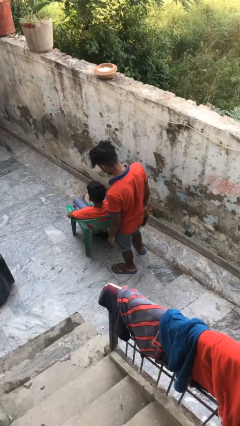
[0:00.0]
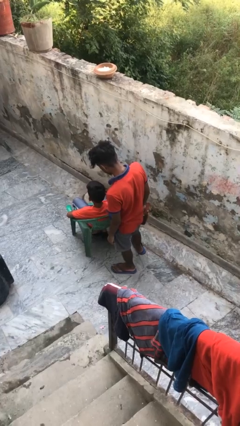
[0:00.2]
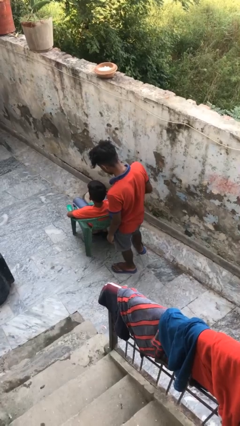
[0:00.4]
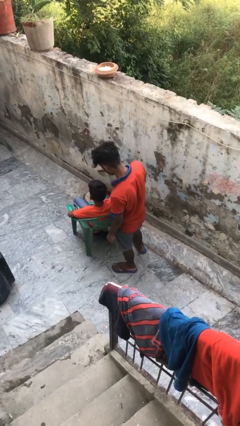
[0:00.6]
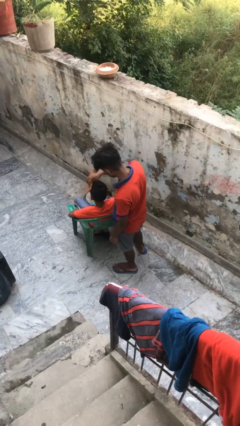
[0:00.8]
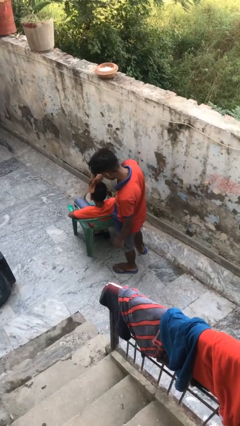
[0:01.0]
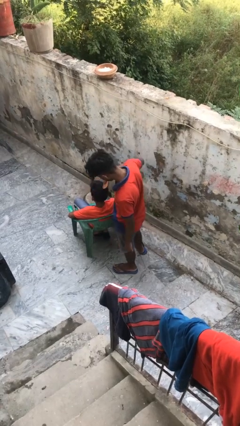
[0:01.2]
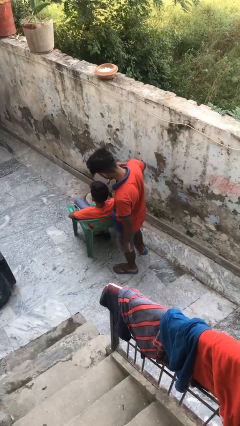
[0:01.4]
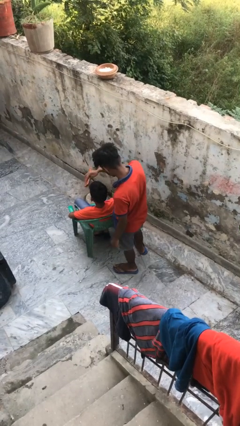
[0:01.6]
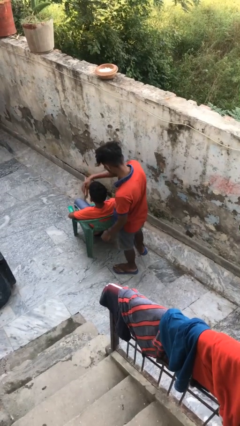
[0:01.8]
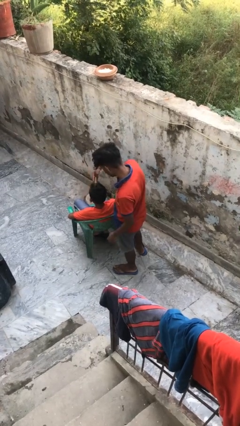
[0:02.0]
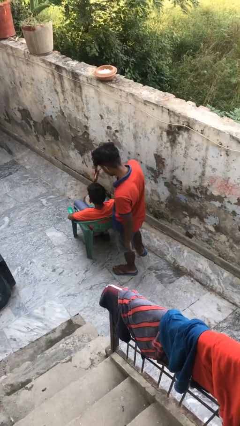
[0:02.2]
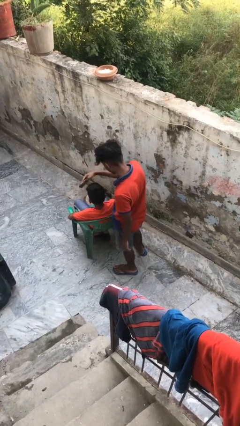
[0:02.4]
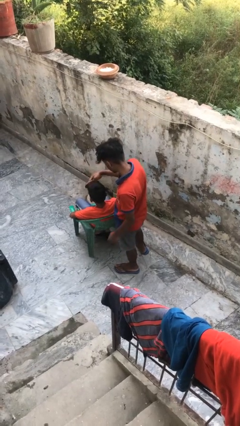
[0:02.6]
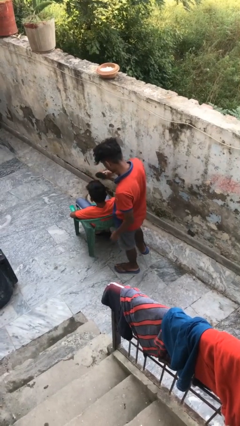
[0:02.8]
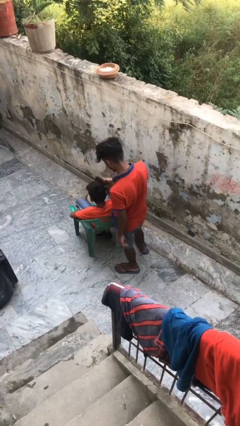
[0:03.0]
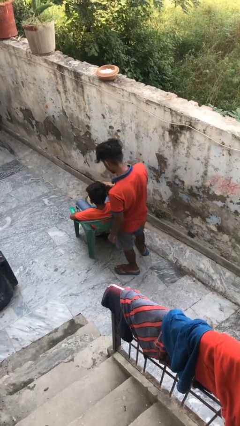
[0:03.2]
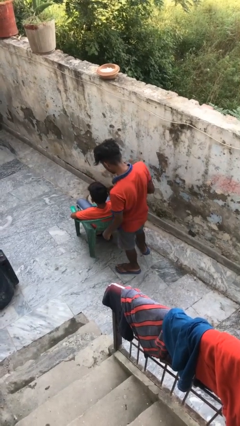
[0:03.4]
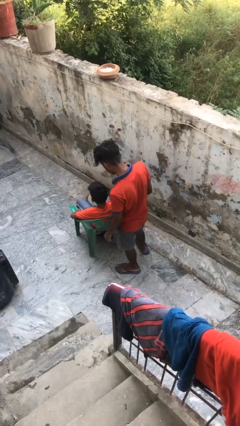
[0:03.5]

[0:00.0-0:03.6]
person brushes hair of person

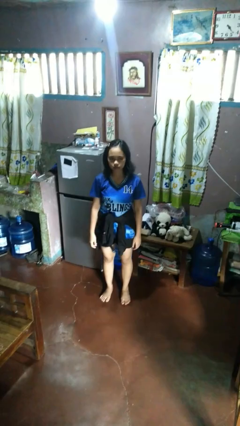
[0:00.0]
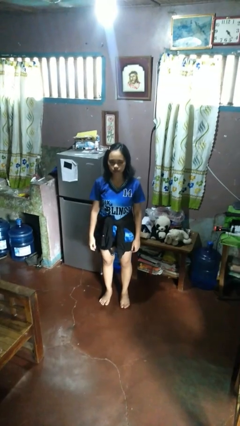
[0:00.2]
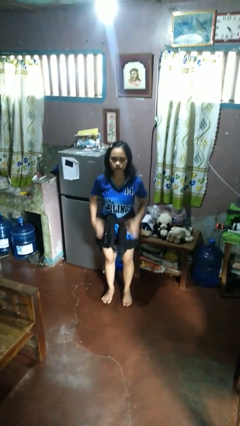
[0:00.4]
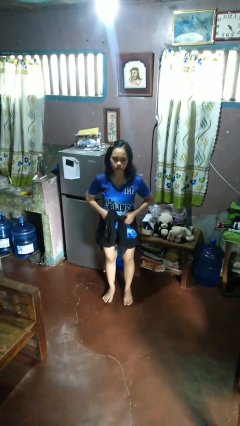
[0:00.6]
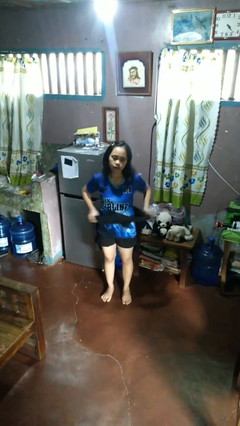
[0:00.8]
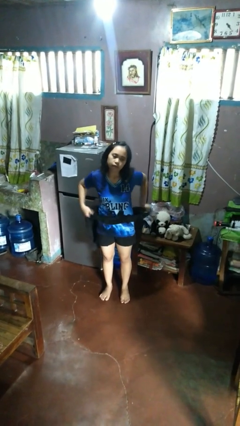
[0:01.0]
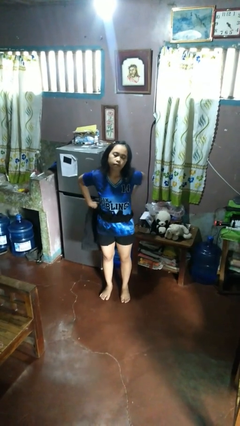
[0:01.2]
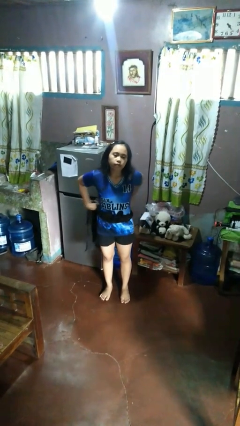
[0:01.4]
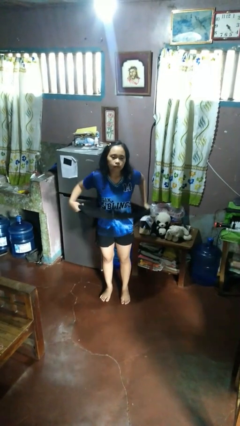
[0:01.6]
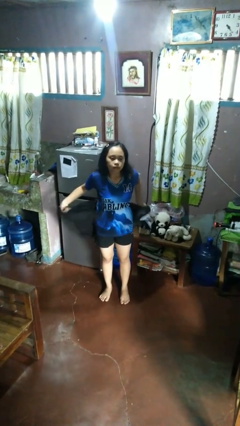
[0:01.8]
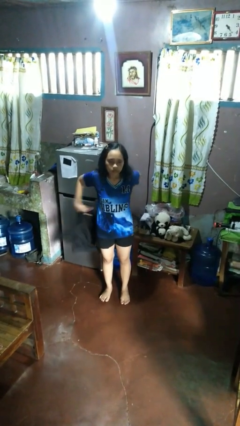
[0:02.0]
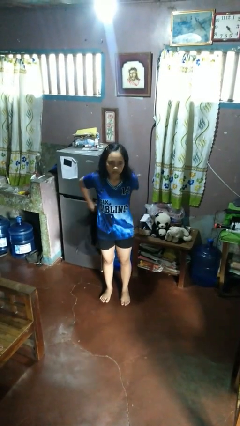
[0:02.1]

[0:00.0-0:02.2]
person unties jacket around waist

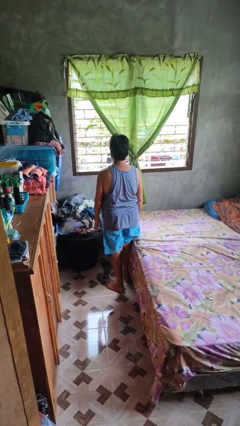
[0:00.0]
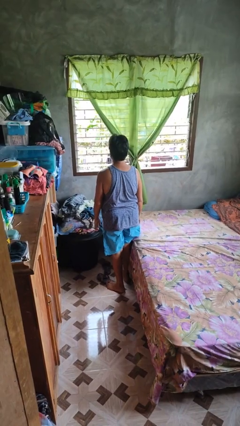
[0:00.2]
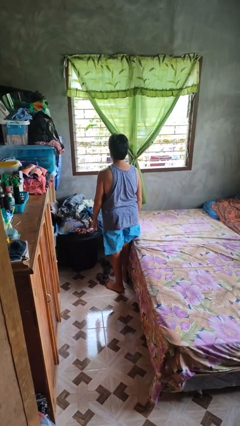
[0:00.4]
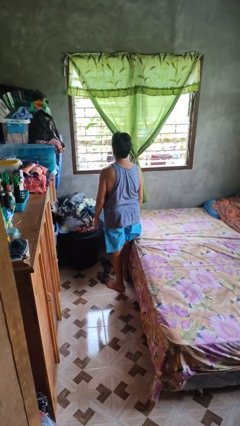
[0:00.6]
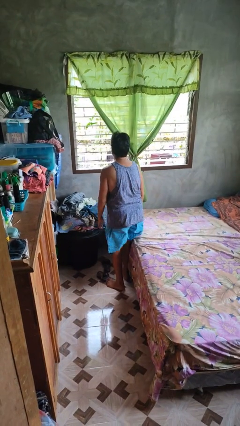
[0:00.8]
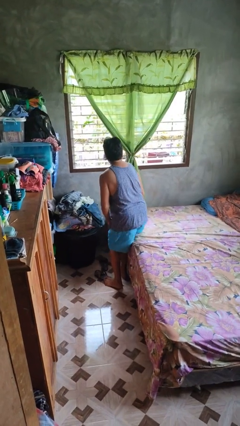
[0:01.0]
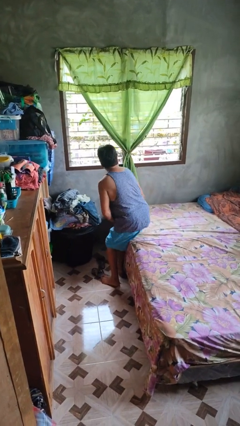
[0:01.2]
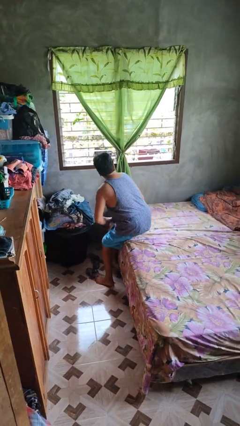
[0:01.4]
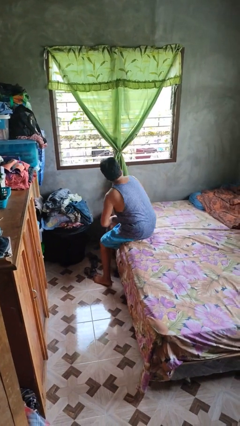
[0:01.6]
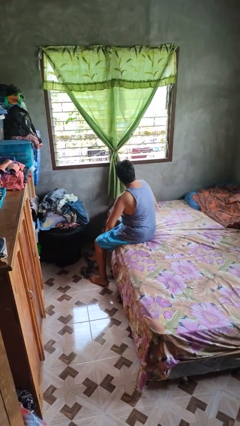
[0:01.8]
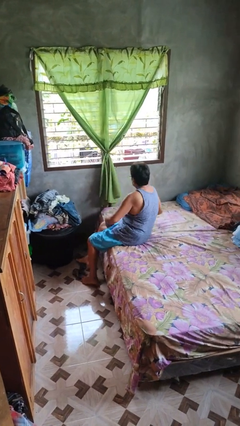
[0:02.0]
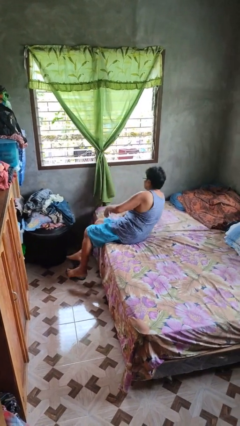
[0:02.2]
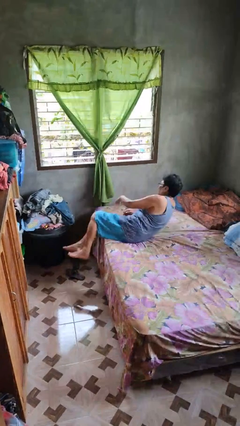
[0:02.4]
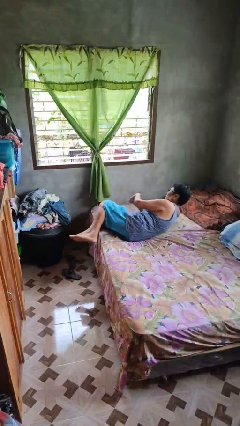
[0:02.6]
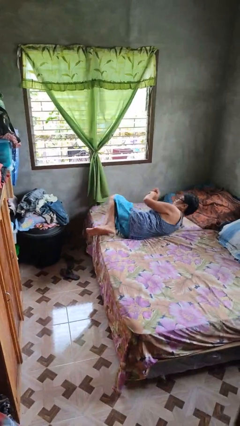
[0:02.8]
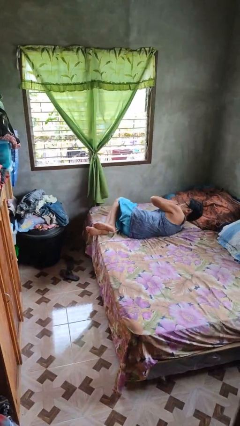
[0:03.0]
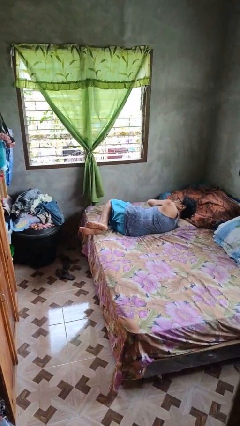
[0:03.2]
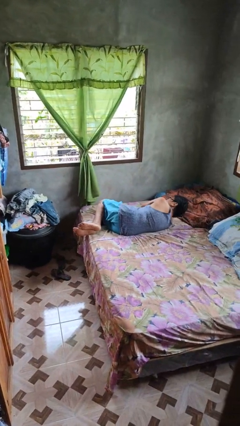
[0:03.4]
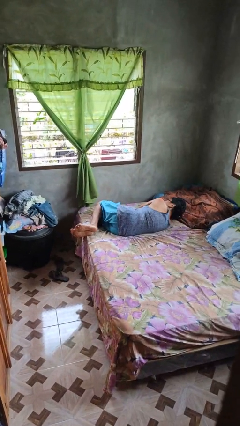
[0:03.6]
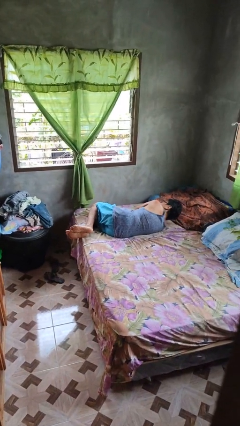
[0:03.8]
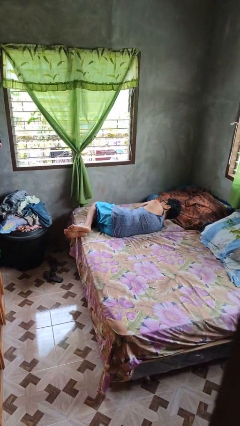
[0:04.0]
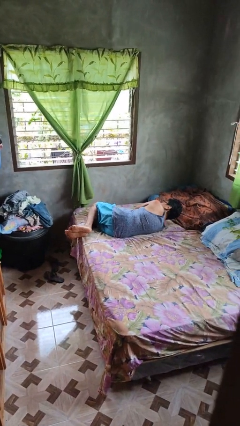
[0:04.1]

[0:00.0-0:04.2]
person lies down on bed

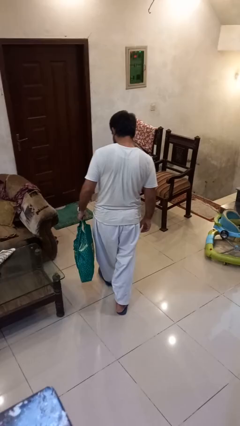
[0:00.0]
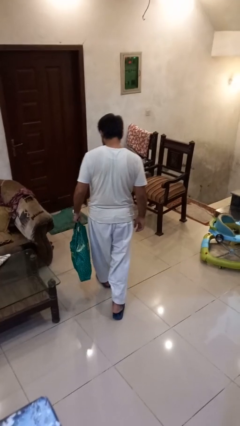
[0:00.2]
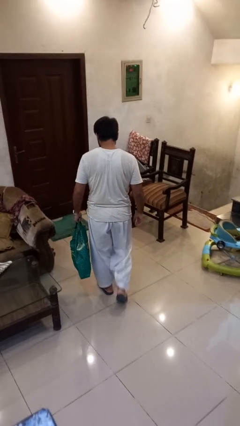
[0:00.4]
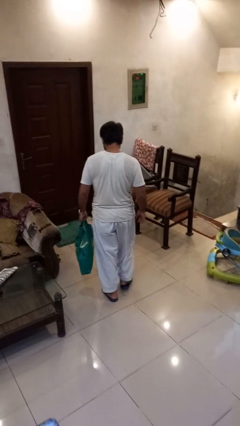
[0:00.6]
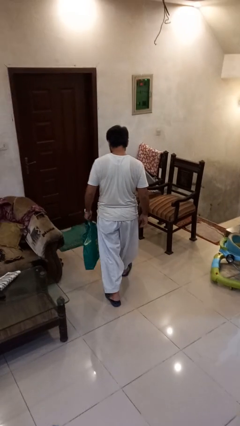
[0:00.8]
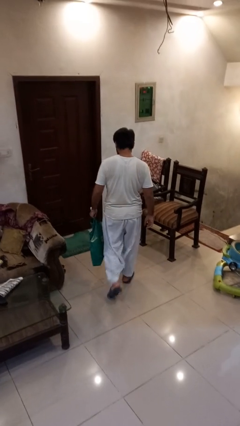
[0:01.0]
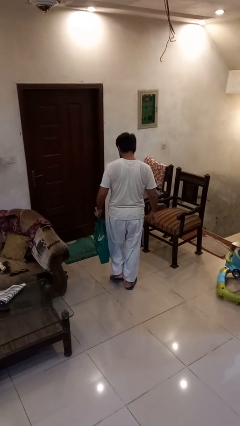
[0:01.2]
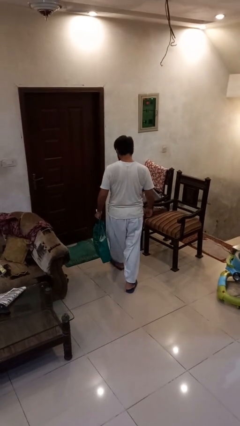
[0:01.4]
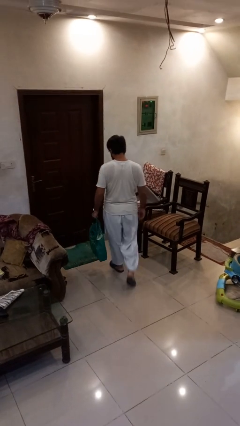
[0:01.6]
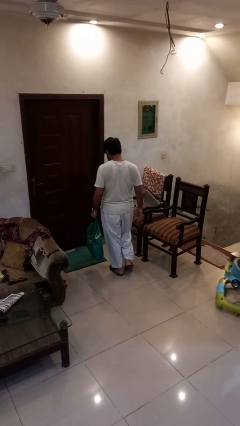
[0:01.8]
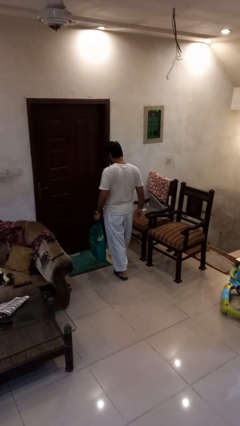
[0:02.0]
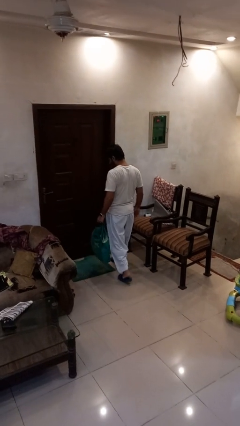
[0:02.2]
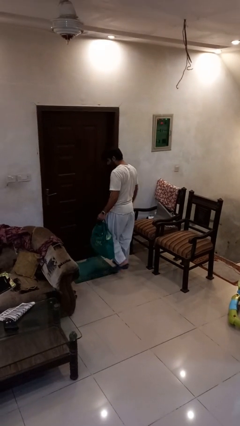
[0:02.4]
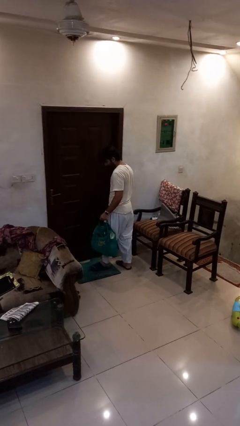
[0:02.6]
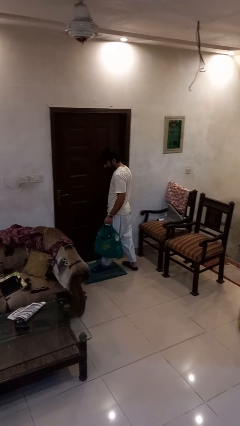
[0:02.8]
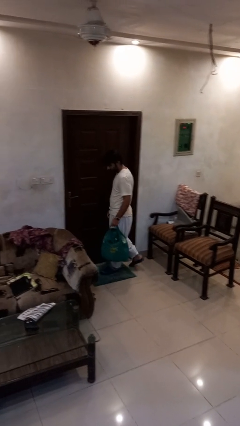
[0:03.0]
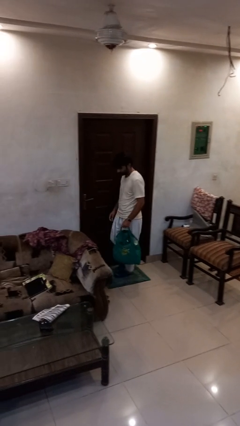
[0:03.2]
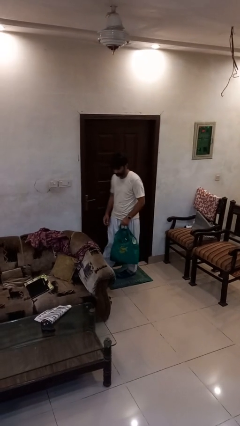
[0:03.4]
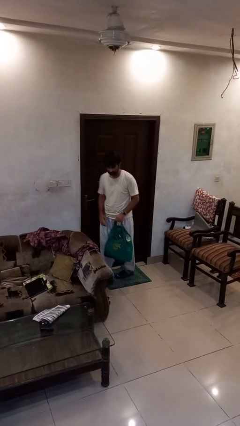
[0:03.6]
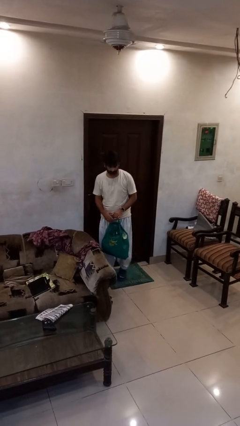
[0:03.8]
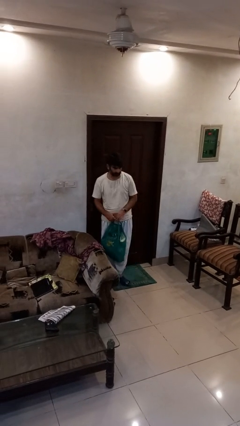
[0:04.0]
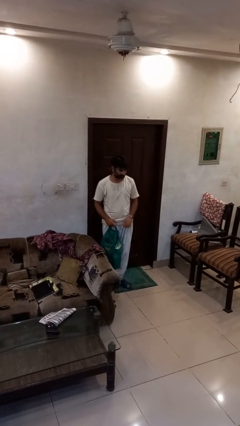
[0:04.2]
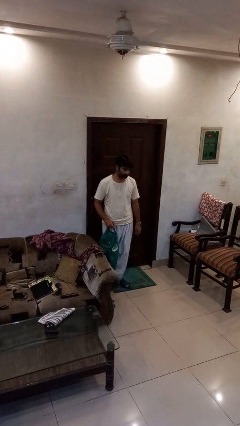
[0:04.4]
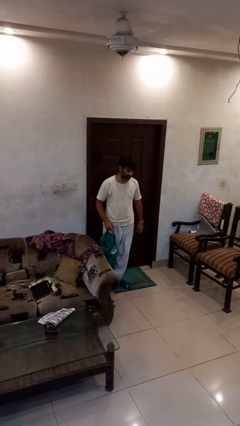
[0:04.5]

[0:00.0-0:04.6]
person carries groceries

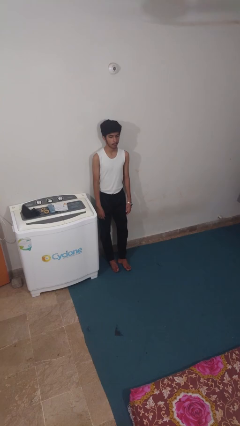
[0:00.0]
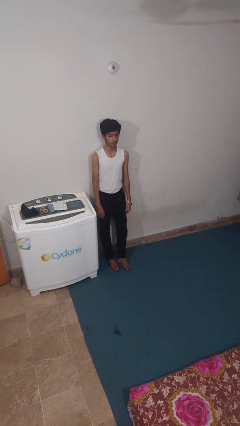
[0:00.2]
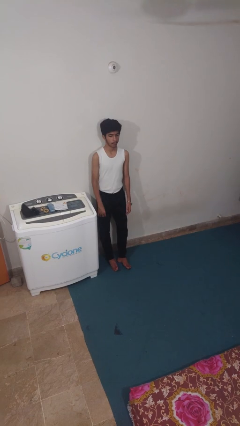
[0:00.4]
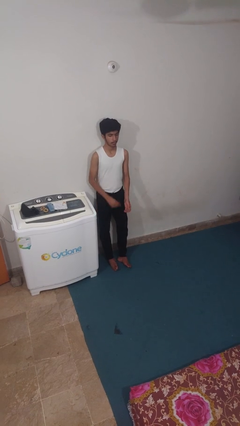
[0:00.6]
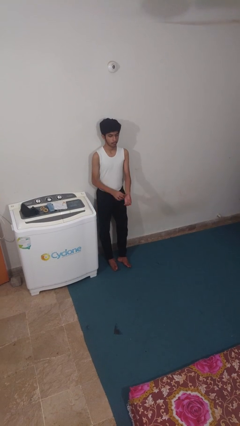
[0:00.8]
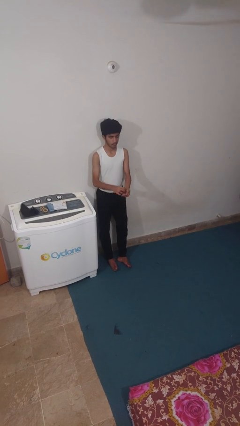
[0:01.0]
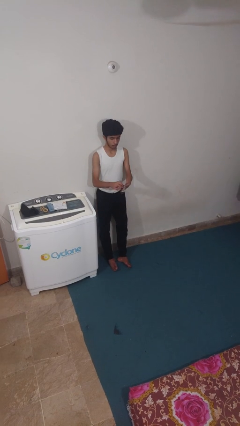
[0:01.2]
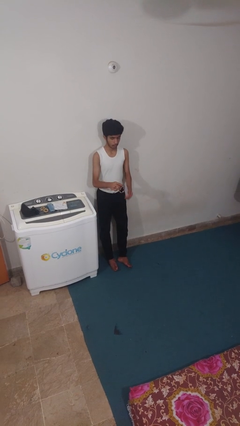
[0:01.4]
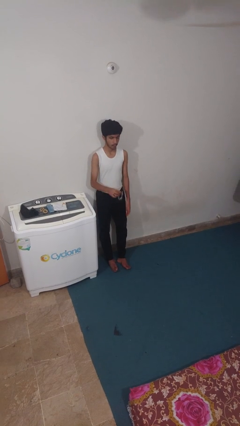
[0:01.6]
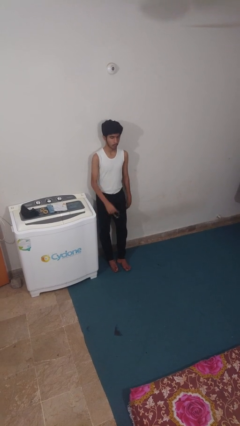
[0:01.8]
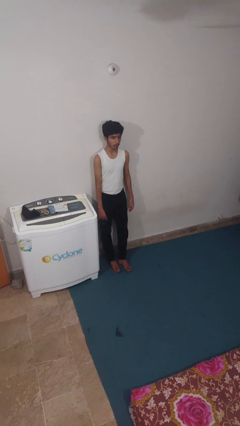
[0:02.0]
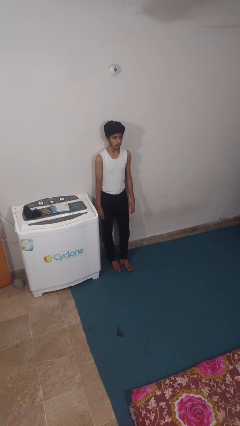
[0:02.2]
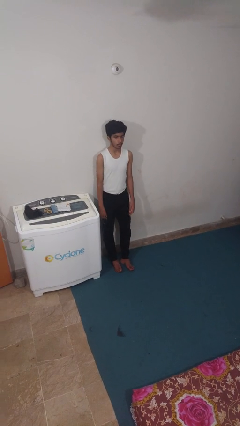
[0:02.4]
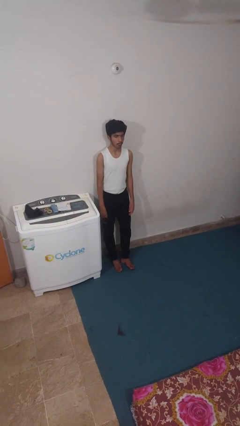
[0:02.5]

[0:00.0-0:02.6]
person takes off wristwatch

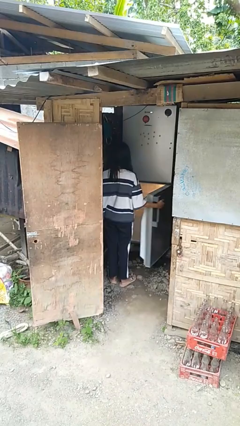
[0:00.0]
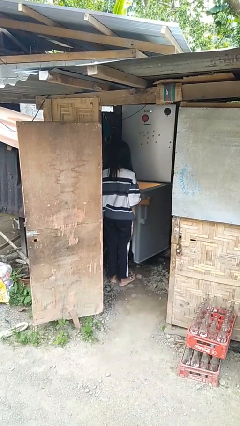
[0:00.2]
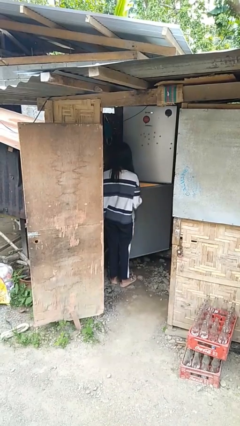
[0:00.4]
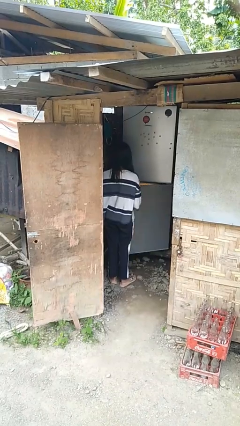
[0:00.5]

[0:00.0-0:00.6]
person closes refrigerator
